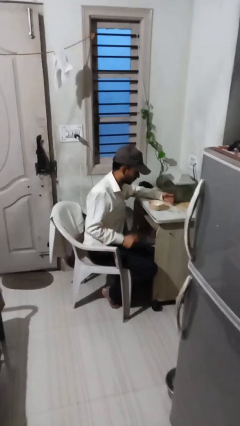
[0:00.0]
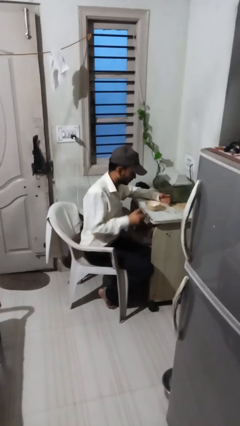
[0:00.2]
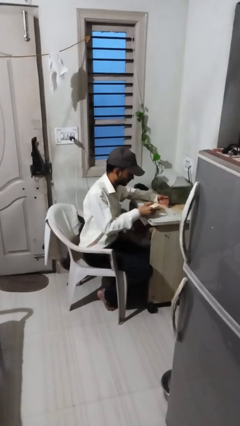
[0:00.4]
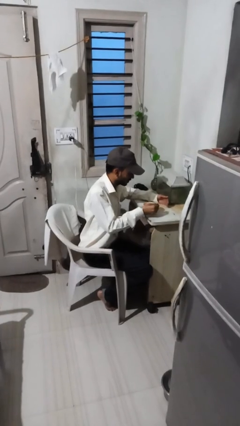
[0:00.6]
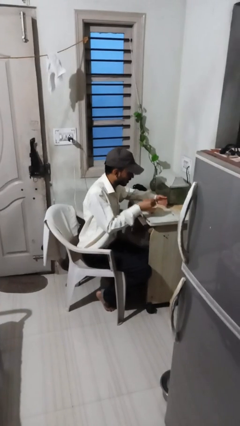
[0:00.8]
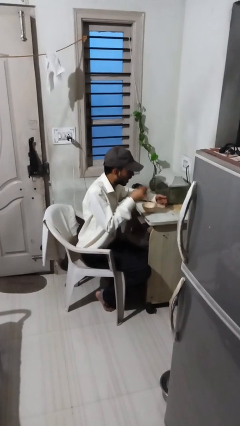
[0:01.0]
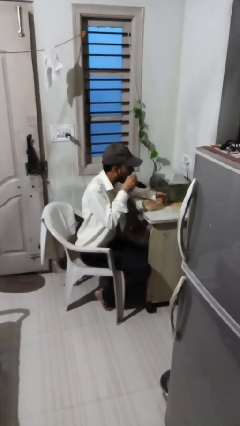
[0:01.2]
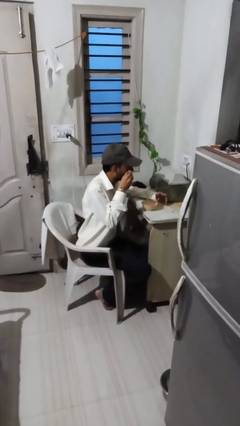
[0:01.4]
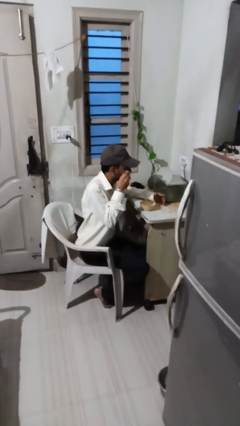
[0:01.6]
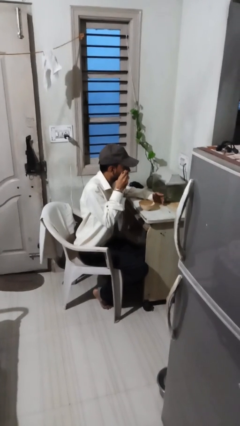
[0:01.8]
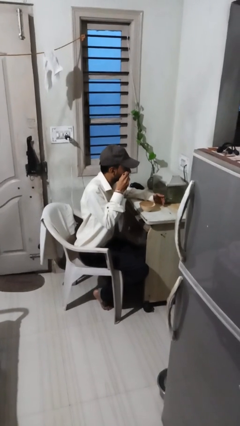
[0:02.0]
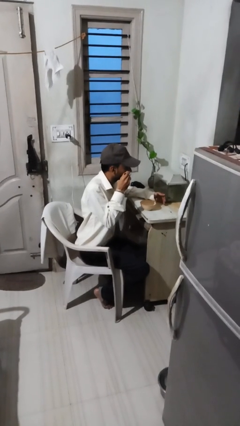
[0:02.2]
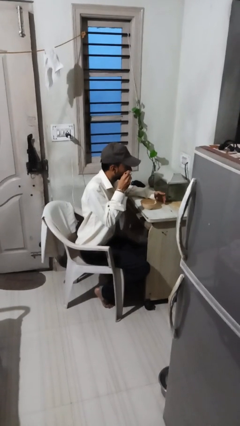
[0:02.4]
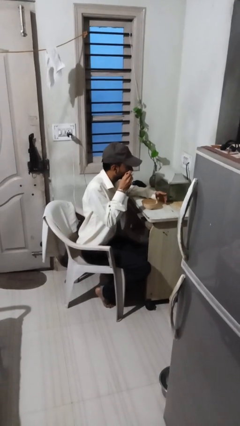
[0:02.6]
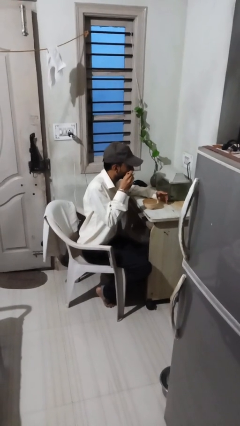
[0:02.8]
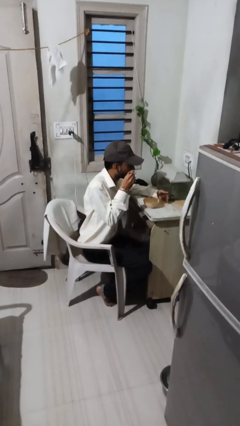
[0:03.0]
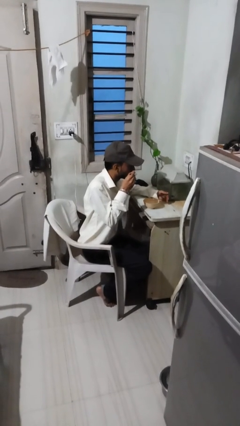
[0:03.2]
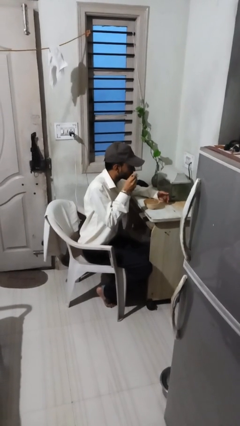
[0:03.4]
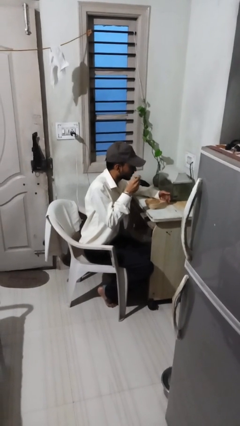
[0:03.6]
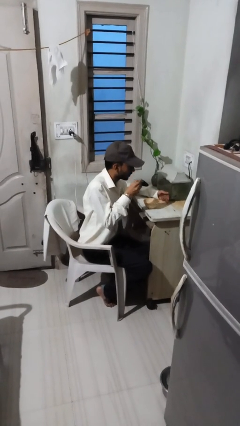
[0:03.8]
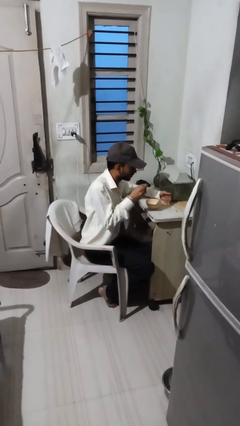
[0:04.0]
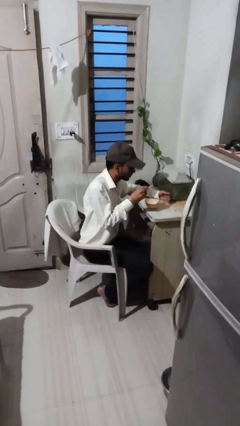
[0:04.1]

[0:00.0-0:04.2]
person eats with utensil

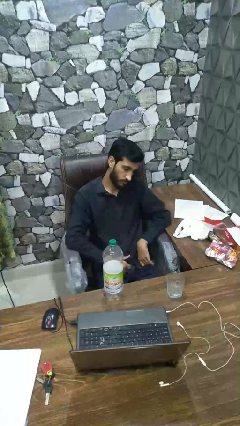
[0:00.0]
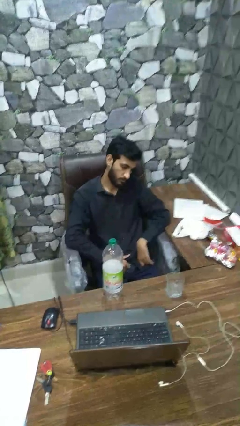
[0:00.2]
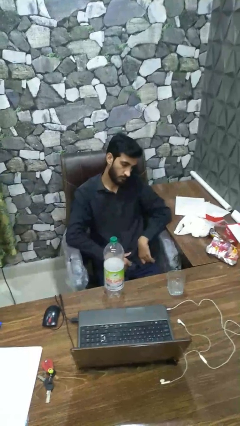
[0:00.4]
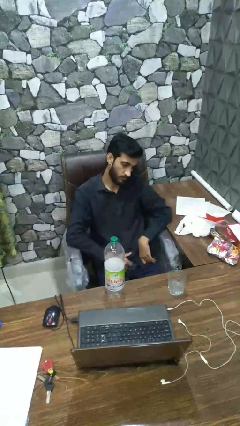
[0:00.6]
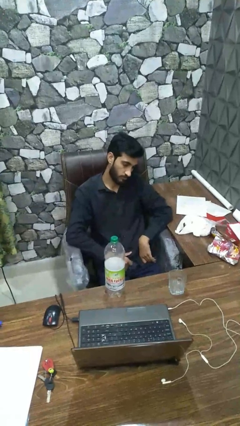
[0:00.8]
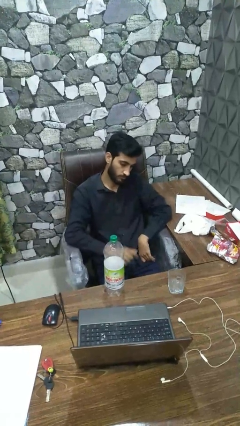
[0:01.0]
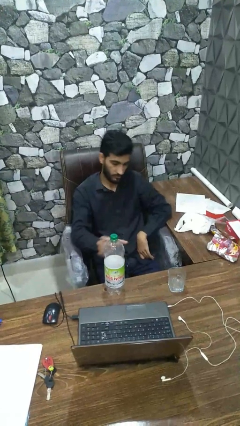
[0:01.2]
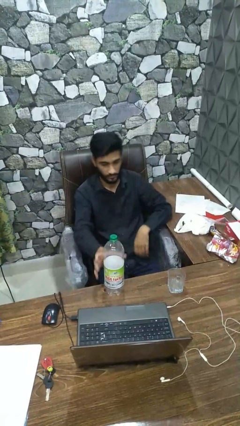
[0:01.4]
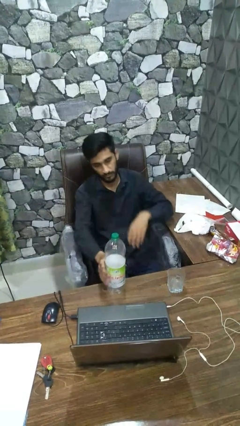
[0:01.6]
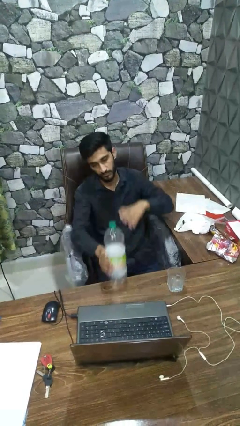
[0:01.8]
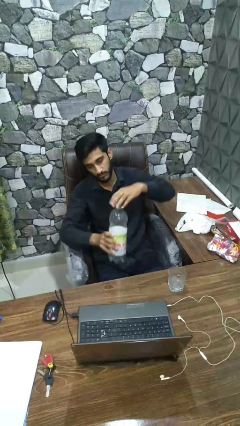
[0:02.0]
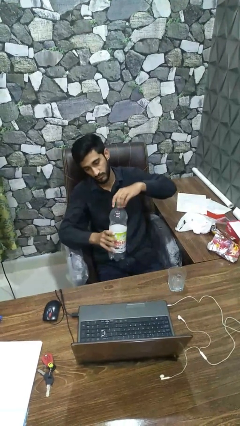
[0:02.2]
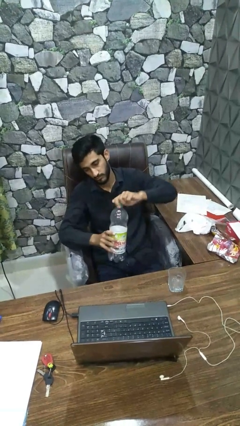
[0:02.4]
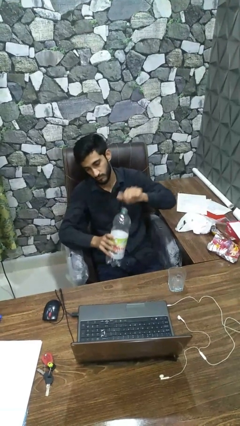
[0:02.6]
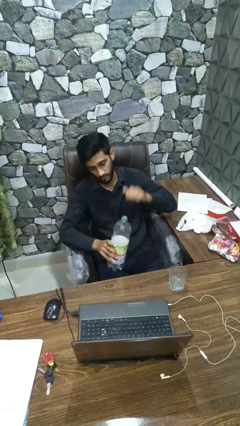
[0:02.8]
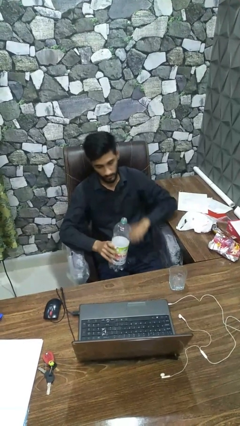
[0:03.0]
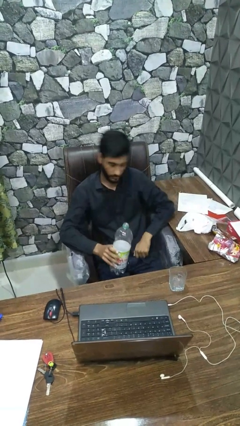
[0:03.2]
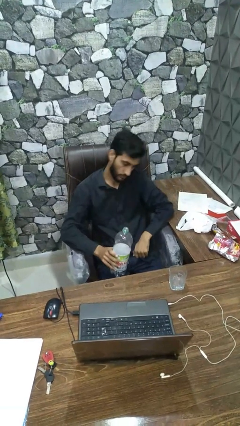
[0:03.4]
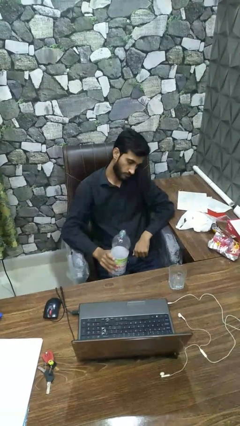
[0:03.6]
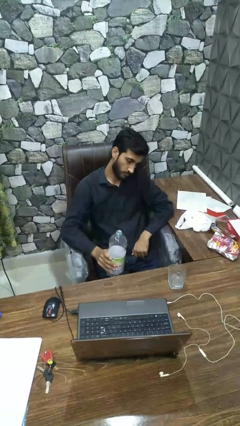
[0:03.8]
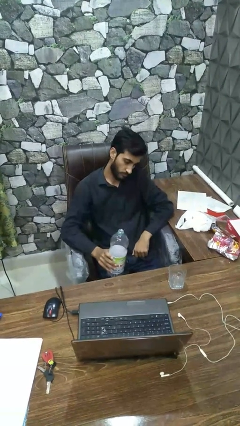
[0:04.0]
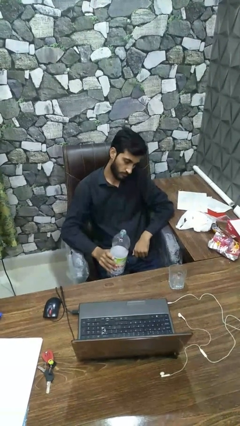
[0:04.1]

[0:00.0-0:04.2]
person unscrews lid from bottle

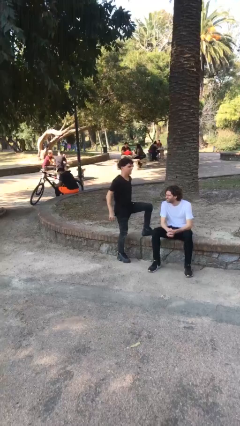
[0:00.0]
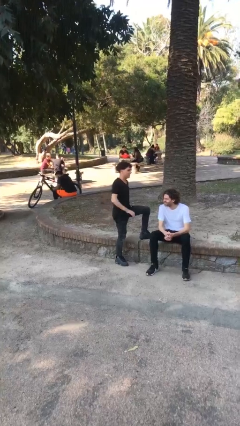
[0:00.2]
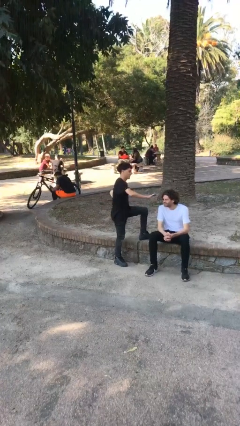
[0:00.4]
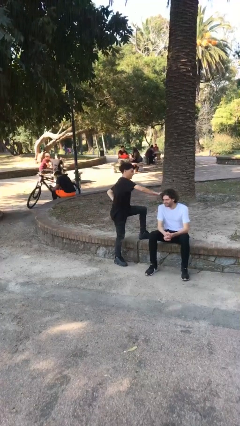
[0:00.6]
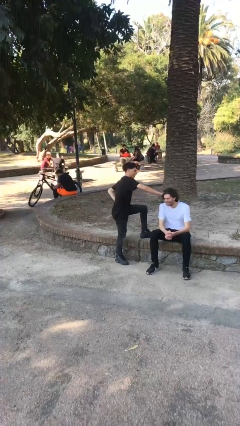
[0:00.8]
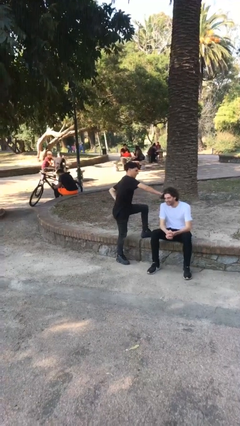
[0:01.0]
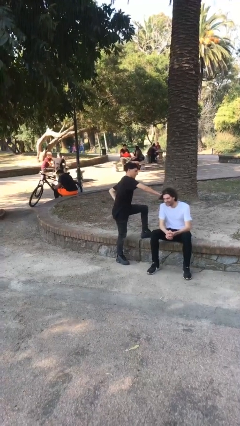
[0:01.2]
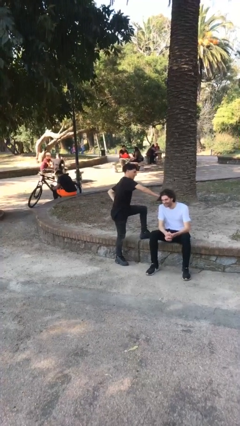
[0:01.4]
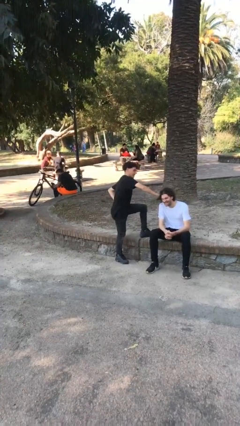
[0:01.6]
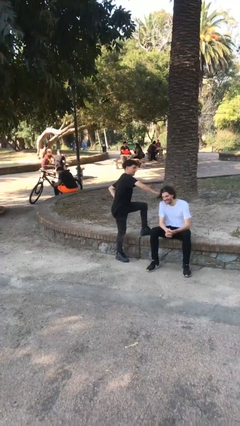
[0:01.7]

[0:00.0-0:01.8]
person grabs person by hair

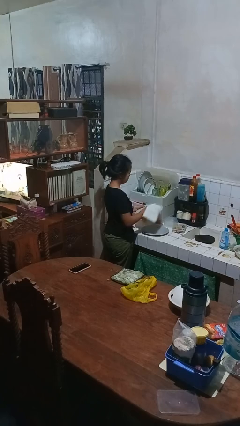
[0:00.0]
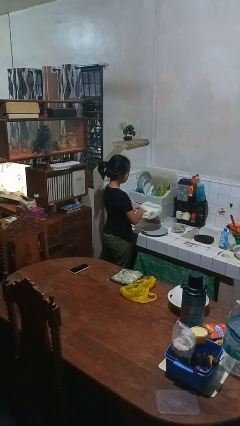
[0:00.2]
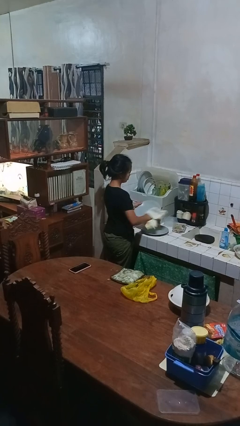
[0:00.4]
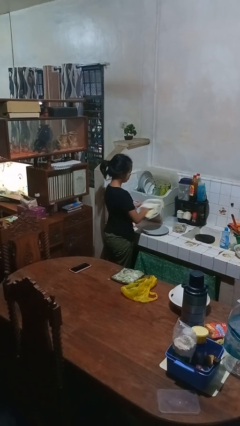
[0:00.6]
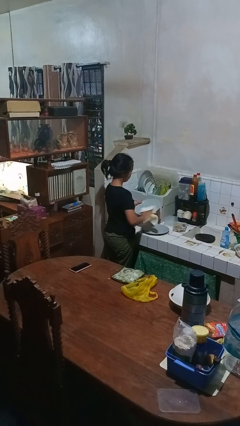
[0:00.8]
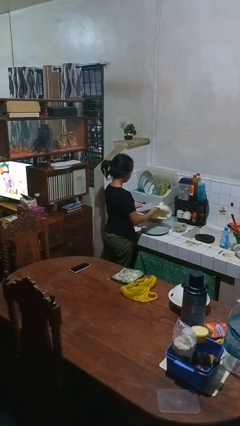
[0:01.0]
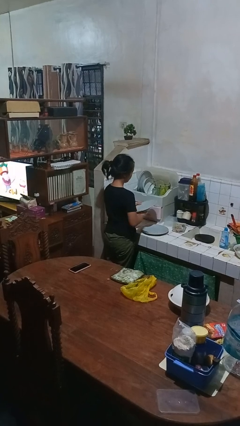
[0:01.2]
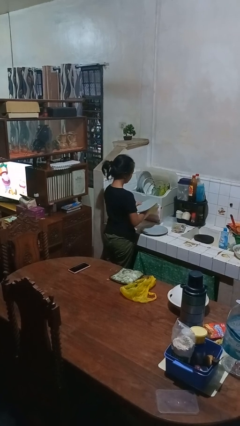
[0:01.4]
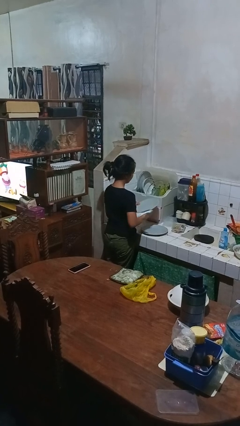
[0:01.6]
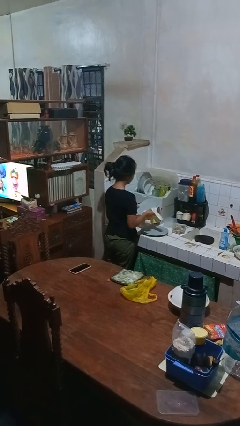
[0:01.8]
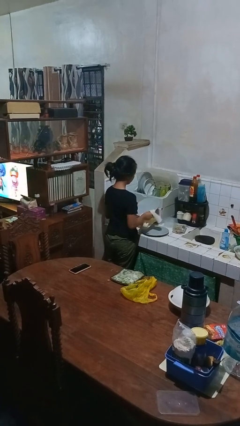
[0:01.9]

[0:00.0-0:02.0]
person dries dish

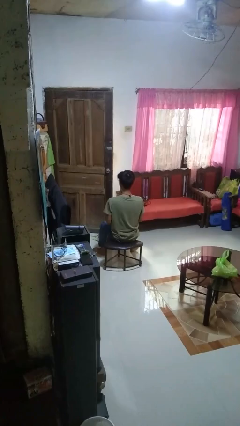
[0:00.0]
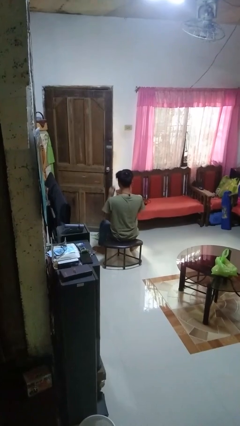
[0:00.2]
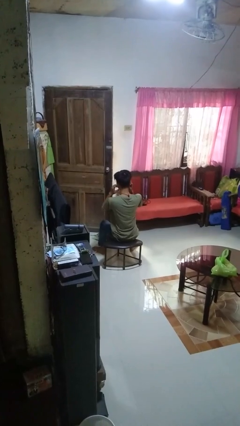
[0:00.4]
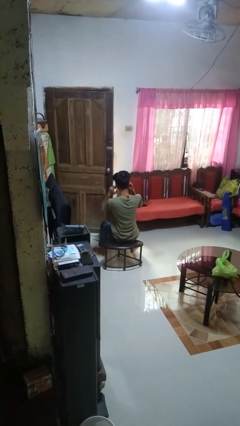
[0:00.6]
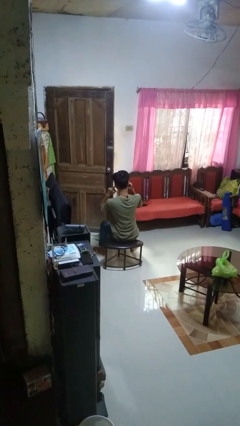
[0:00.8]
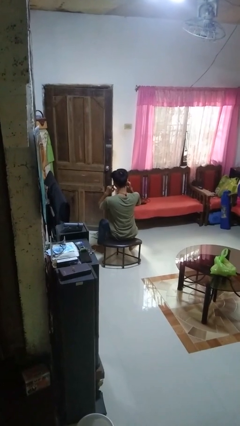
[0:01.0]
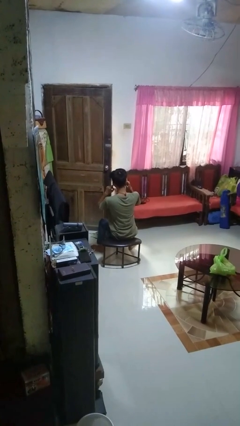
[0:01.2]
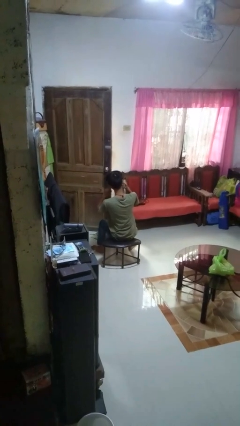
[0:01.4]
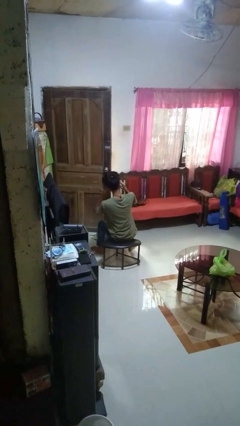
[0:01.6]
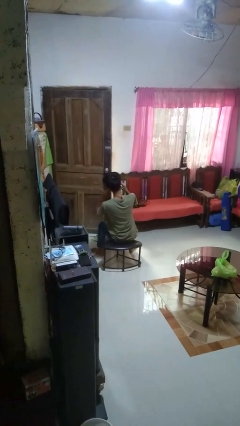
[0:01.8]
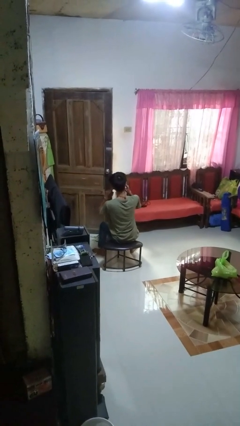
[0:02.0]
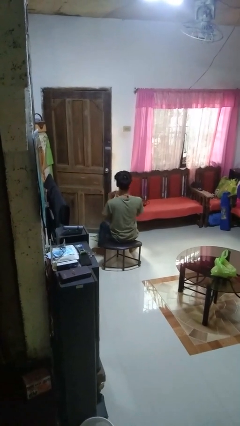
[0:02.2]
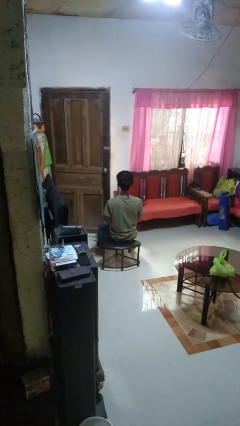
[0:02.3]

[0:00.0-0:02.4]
person puts fingers in ear

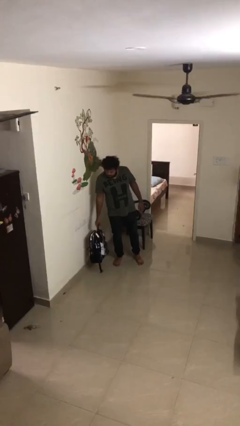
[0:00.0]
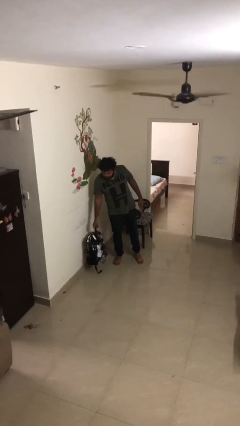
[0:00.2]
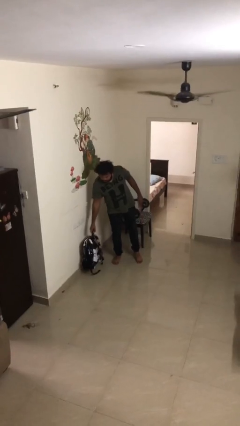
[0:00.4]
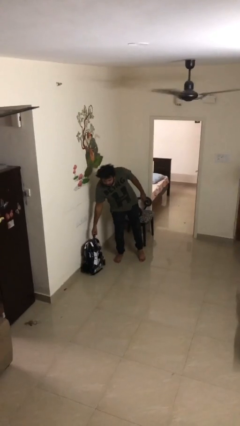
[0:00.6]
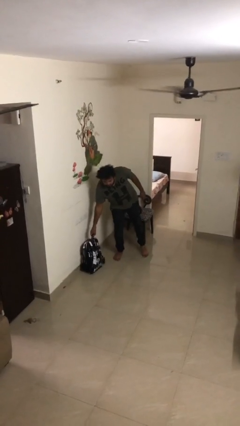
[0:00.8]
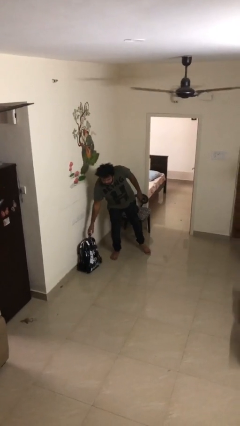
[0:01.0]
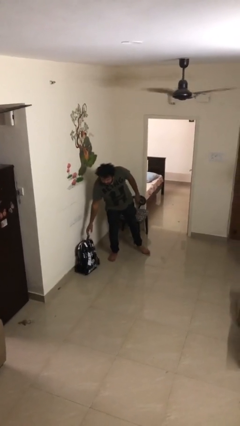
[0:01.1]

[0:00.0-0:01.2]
person puts down object on floor

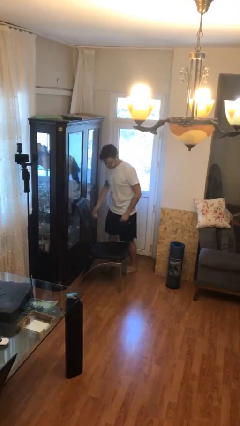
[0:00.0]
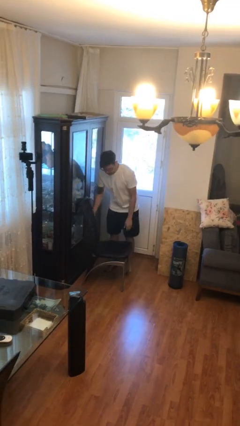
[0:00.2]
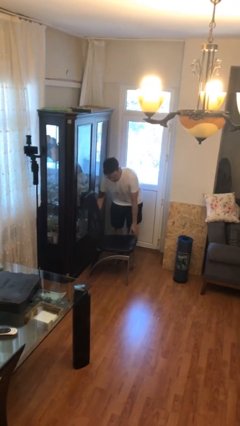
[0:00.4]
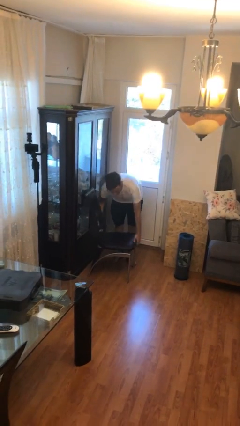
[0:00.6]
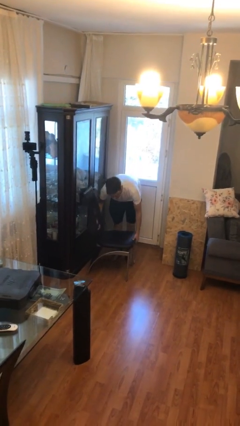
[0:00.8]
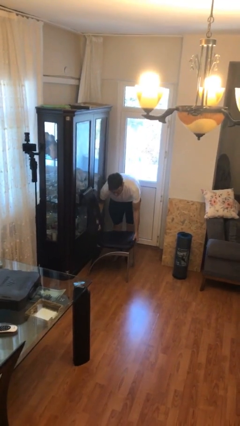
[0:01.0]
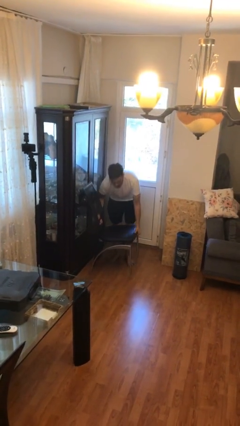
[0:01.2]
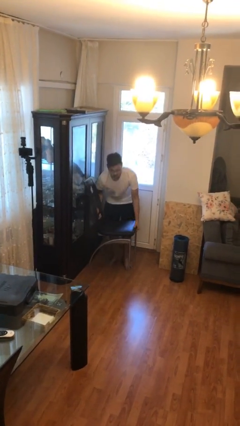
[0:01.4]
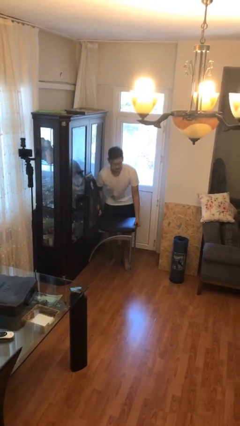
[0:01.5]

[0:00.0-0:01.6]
person picks up object from floor
